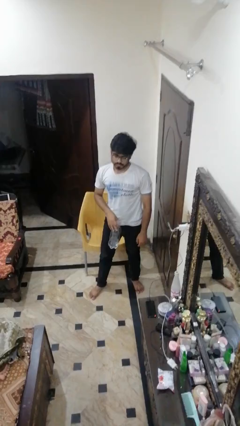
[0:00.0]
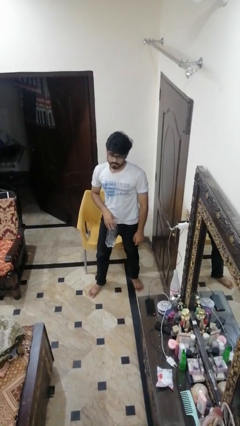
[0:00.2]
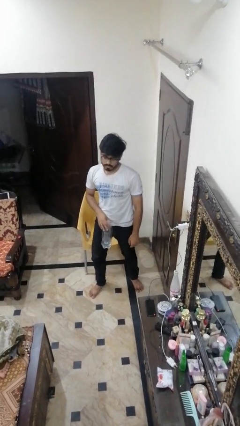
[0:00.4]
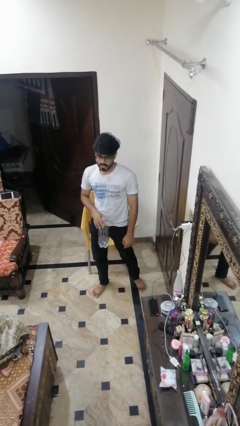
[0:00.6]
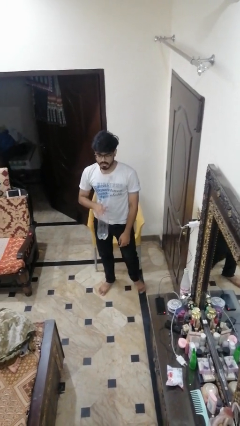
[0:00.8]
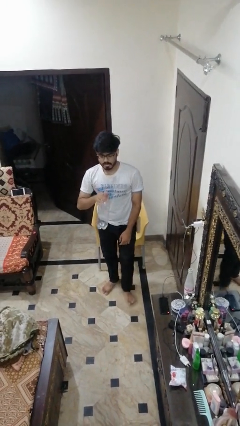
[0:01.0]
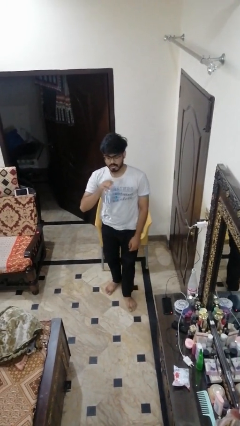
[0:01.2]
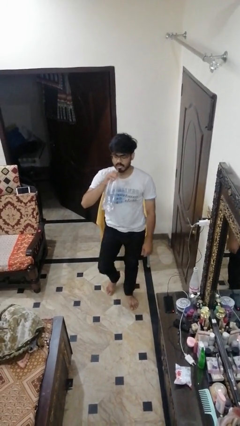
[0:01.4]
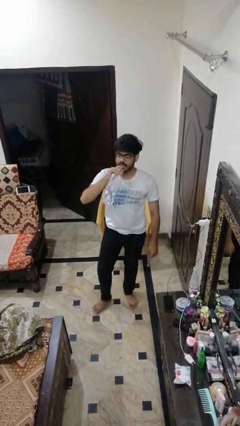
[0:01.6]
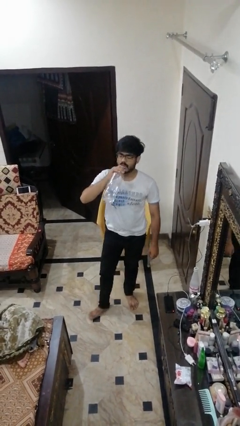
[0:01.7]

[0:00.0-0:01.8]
person drops object

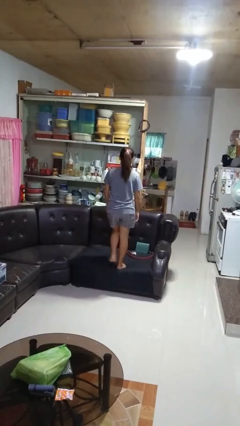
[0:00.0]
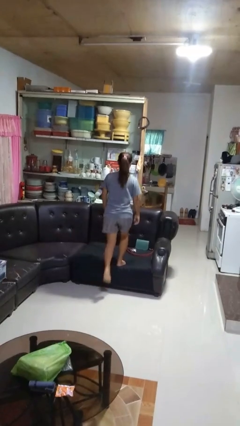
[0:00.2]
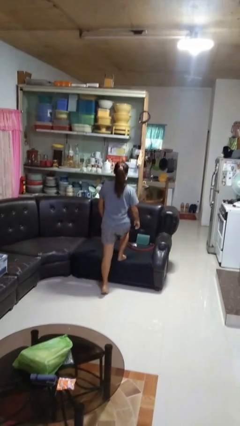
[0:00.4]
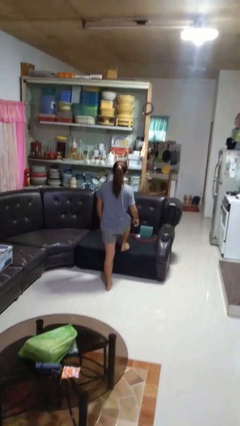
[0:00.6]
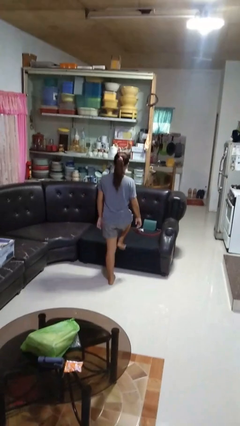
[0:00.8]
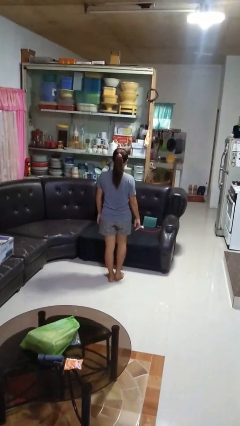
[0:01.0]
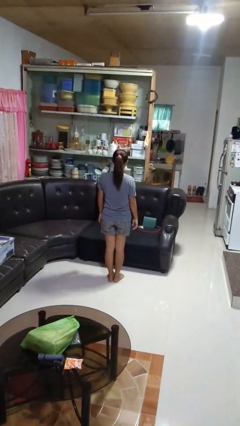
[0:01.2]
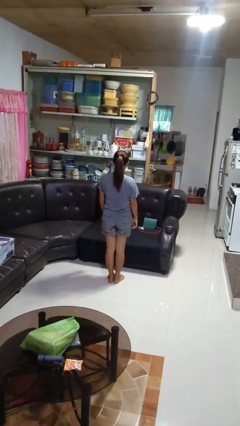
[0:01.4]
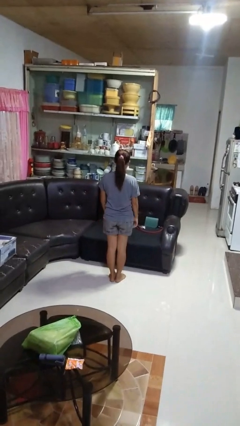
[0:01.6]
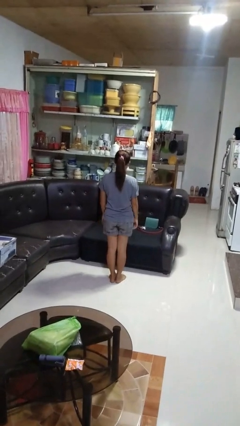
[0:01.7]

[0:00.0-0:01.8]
person climbs off couch

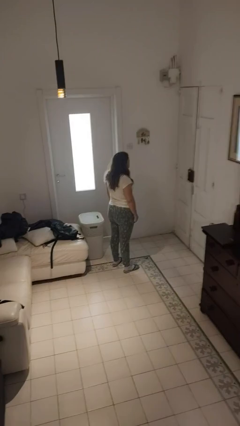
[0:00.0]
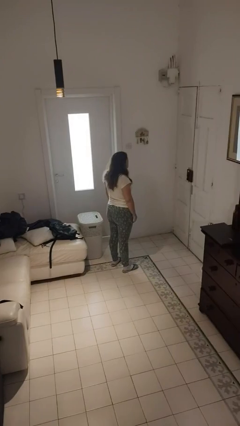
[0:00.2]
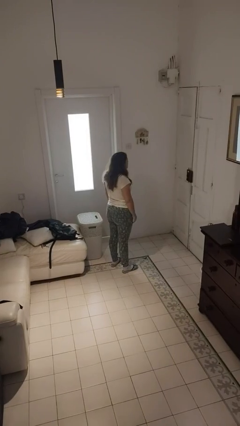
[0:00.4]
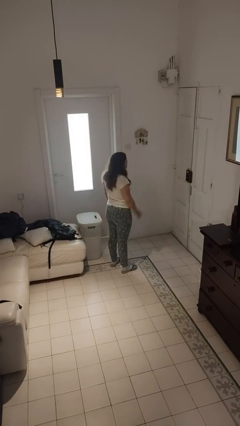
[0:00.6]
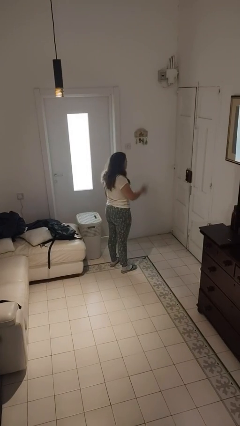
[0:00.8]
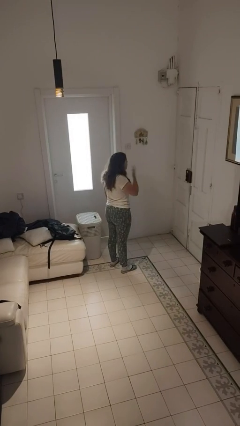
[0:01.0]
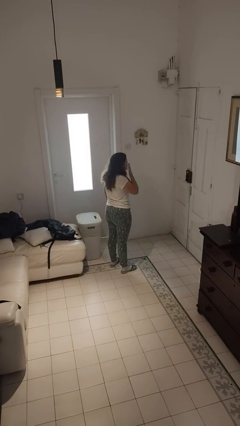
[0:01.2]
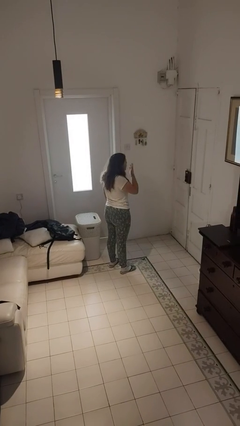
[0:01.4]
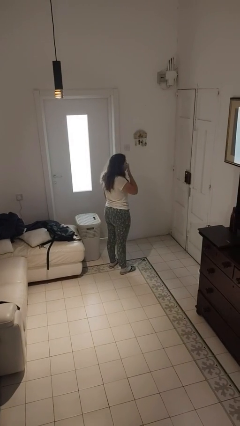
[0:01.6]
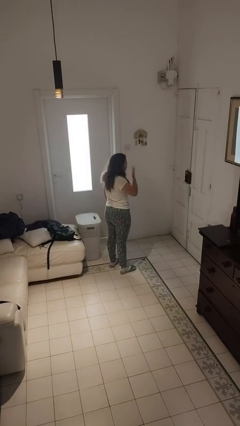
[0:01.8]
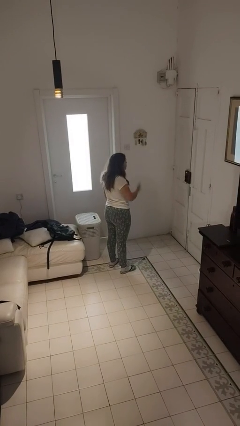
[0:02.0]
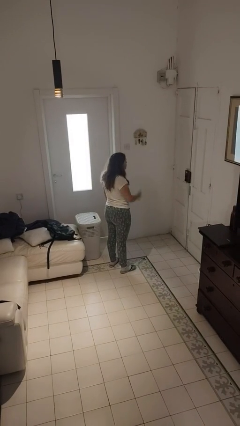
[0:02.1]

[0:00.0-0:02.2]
person yawns

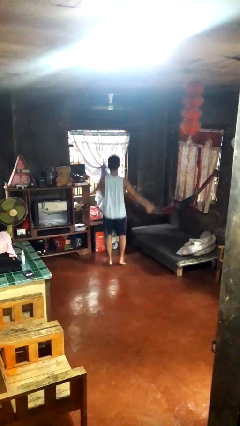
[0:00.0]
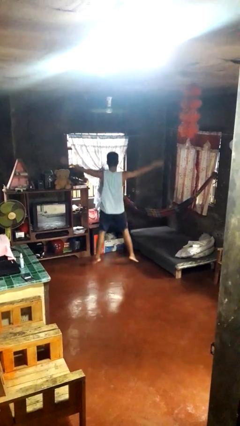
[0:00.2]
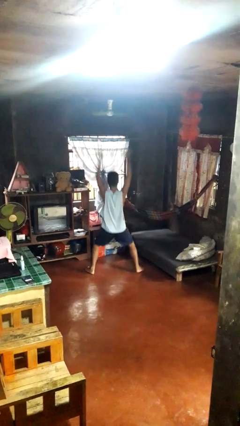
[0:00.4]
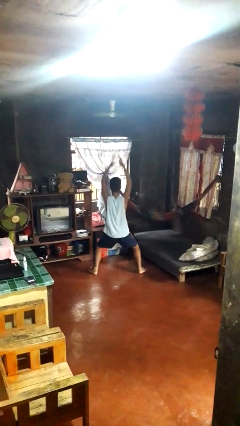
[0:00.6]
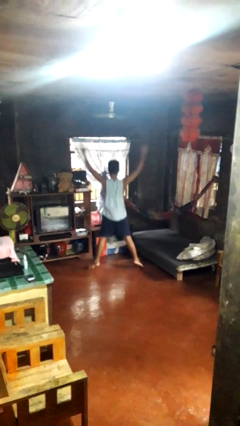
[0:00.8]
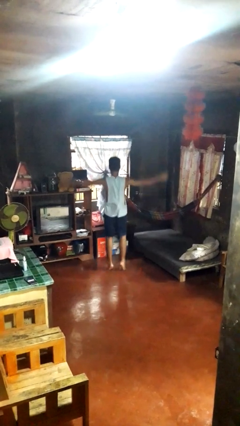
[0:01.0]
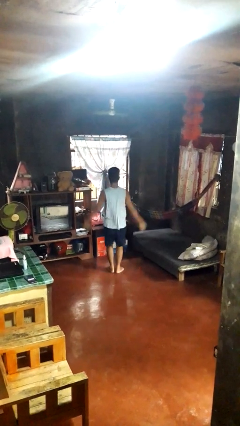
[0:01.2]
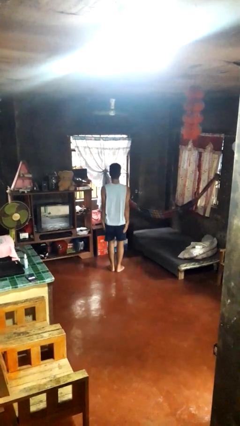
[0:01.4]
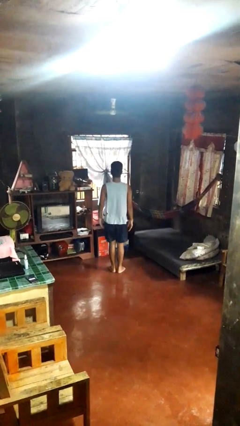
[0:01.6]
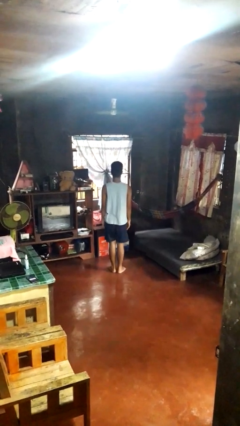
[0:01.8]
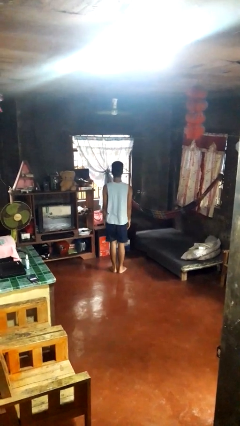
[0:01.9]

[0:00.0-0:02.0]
person exercises with jumping jacks

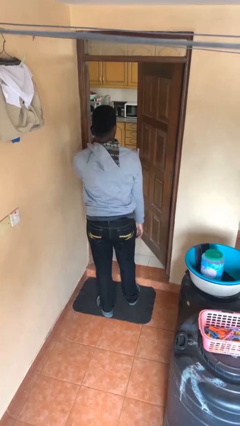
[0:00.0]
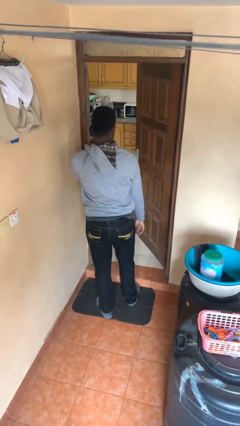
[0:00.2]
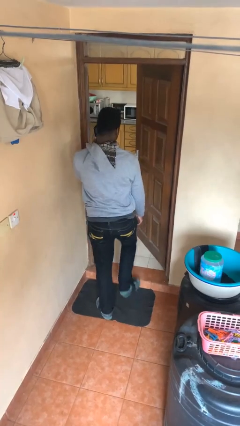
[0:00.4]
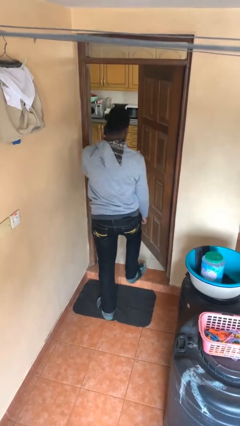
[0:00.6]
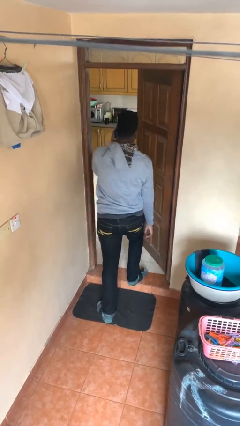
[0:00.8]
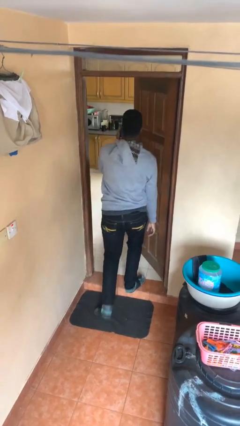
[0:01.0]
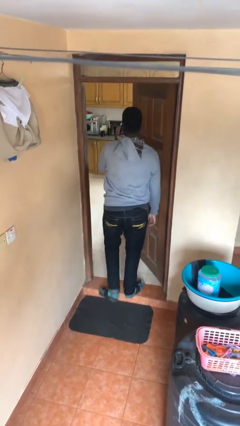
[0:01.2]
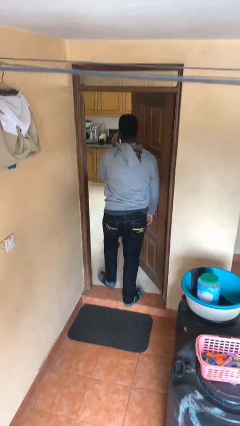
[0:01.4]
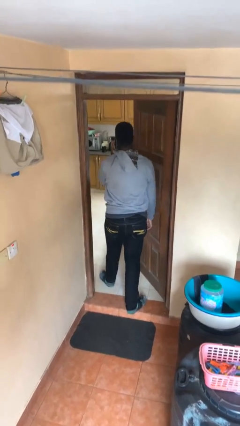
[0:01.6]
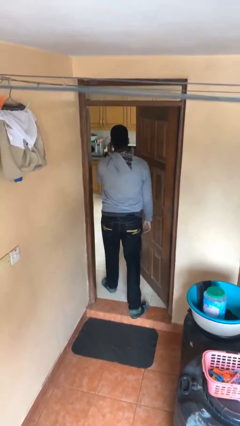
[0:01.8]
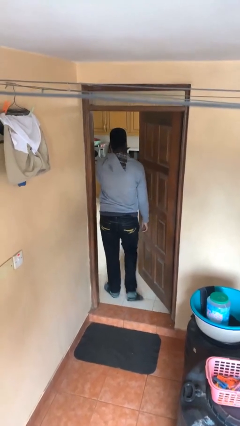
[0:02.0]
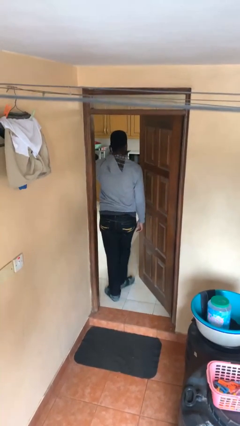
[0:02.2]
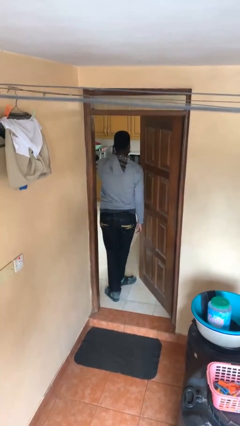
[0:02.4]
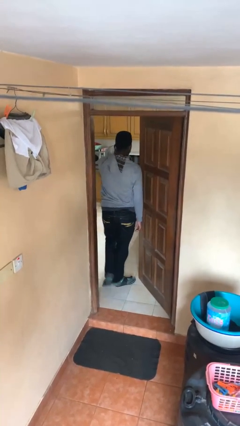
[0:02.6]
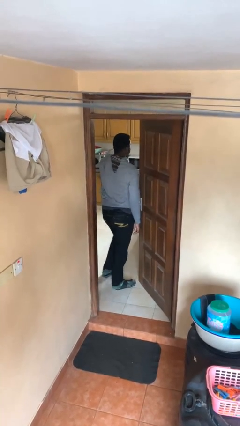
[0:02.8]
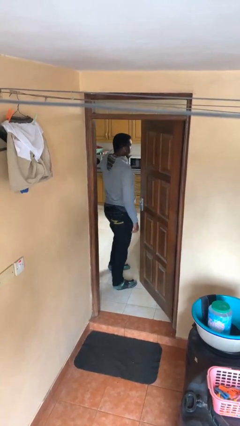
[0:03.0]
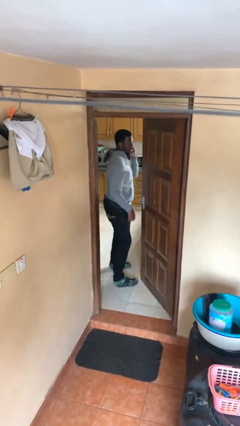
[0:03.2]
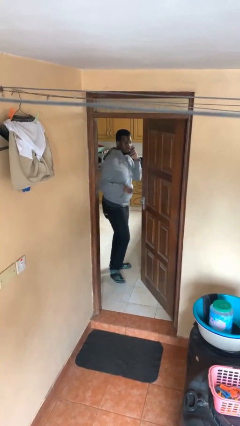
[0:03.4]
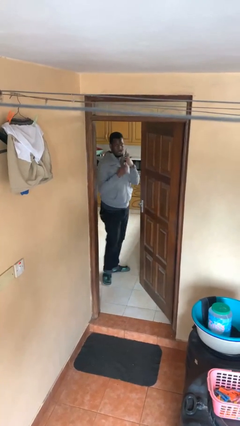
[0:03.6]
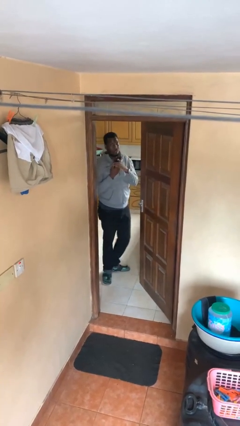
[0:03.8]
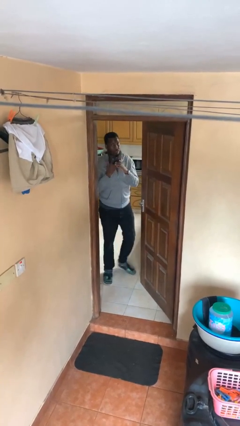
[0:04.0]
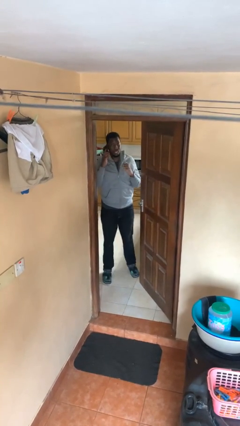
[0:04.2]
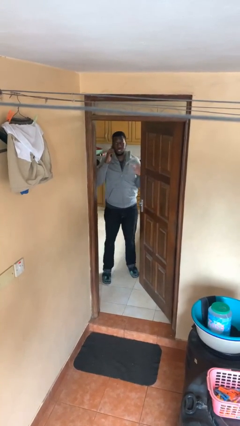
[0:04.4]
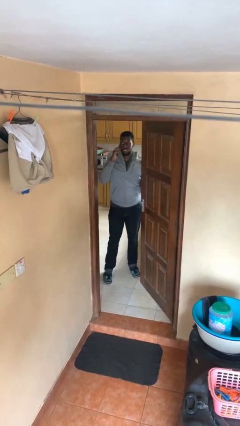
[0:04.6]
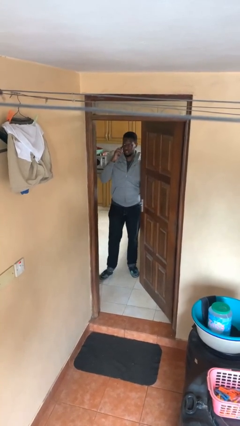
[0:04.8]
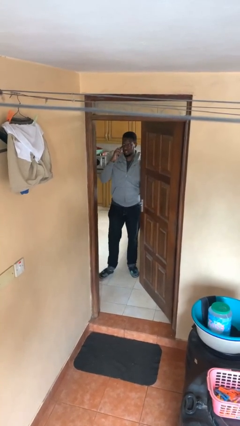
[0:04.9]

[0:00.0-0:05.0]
person exits scene through structure

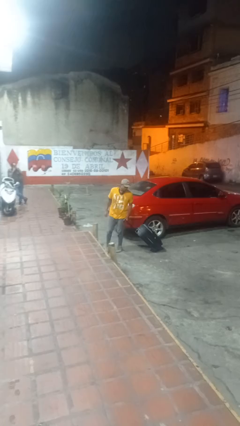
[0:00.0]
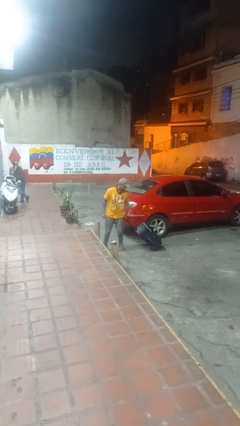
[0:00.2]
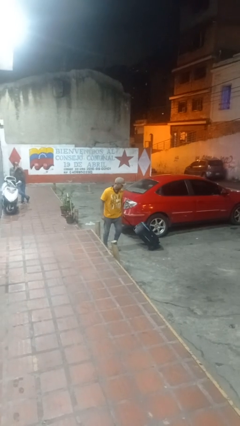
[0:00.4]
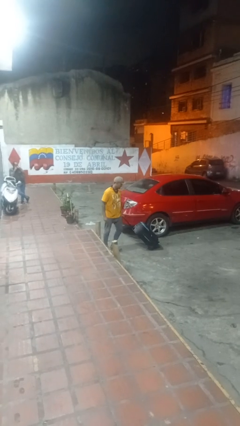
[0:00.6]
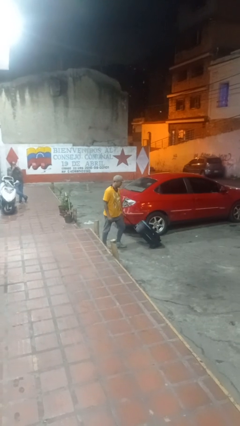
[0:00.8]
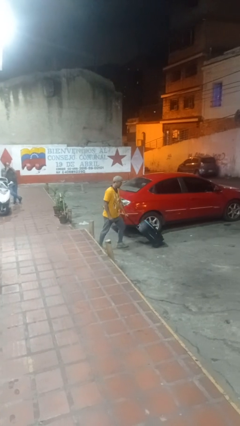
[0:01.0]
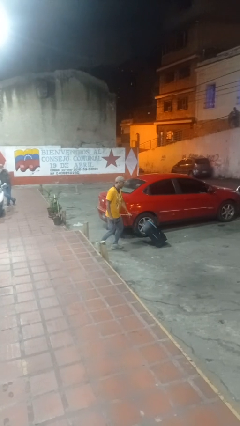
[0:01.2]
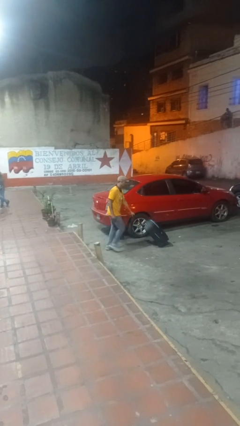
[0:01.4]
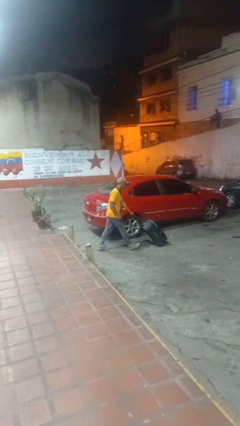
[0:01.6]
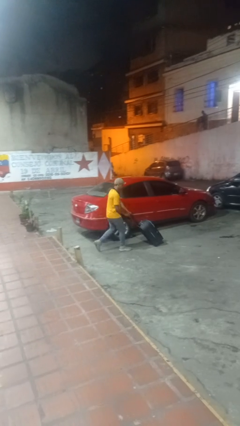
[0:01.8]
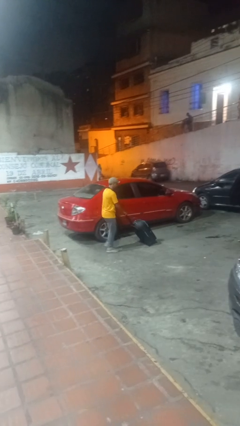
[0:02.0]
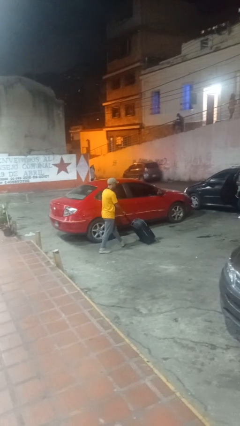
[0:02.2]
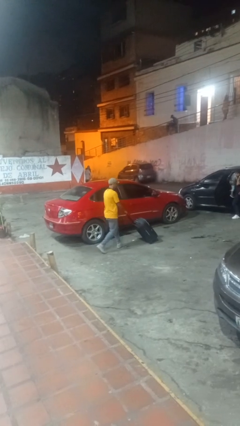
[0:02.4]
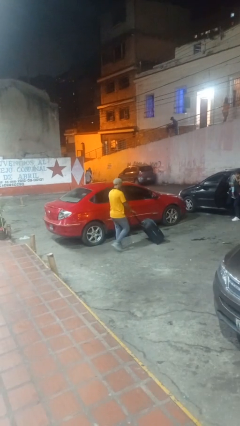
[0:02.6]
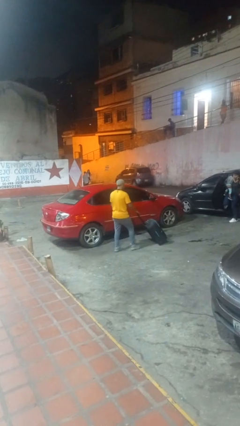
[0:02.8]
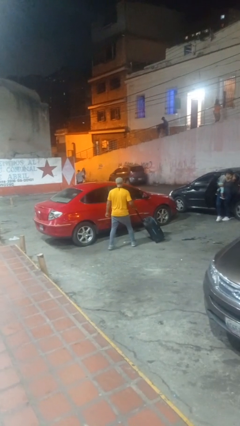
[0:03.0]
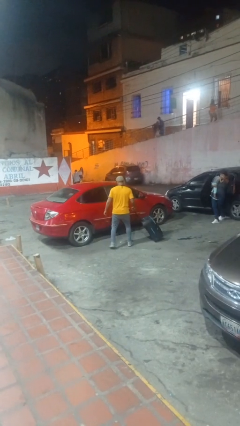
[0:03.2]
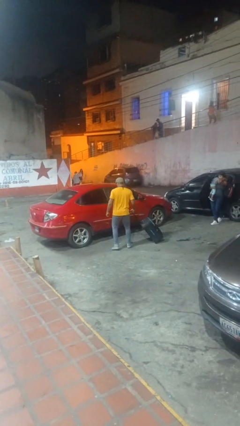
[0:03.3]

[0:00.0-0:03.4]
person pushes wheeled cart

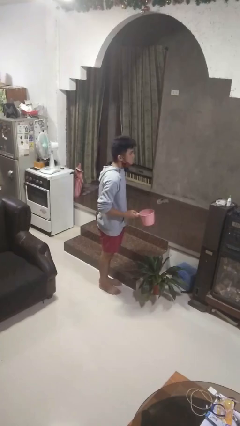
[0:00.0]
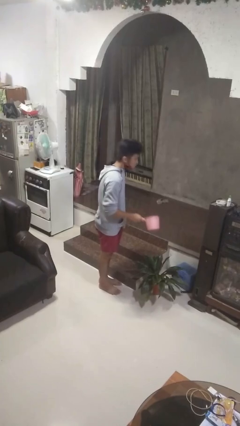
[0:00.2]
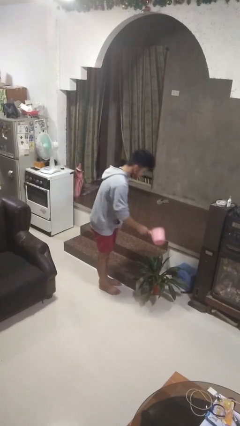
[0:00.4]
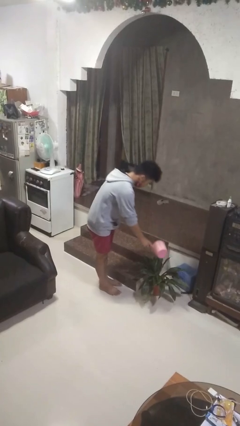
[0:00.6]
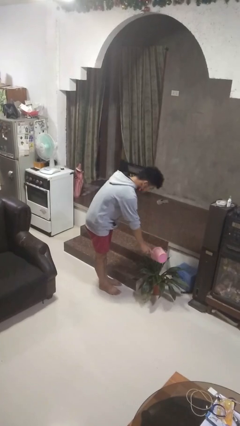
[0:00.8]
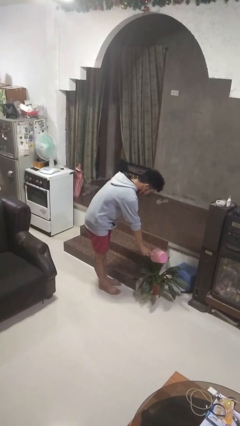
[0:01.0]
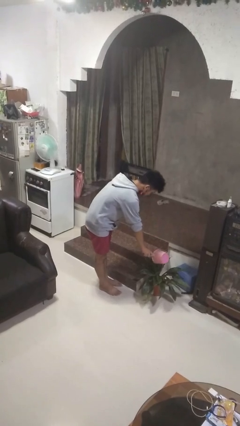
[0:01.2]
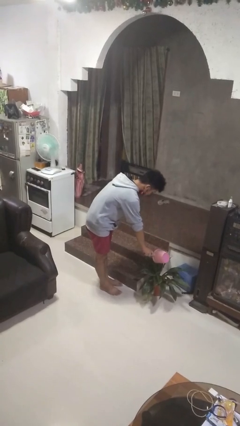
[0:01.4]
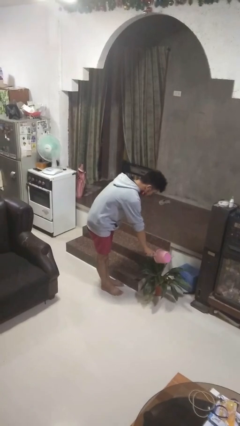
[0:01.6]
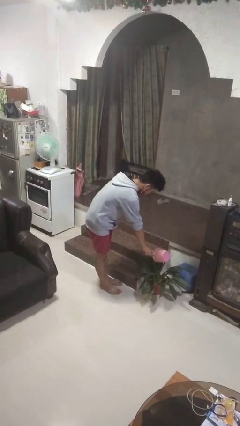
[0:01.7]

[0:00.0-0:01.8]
person waters houseplant
